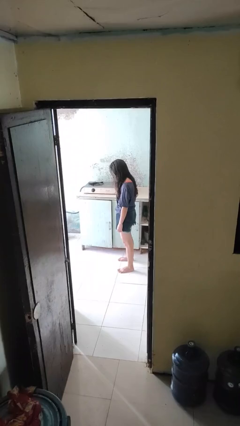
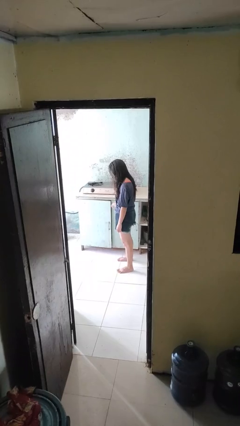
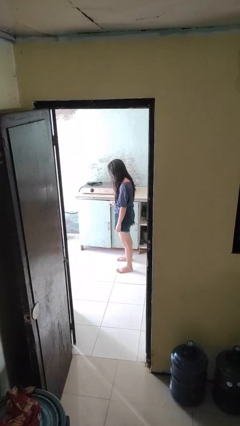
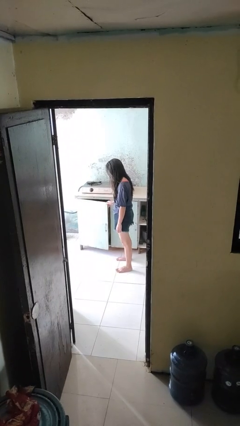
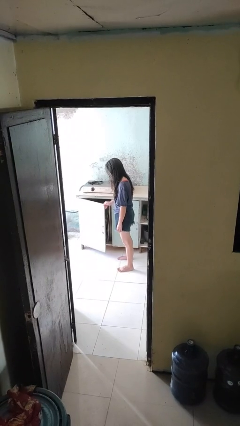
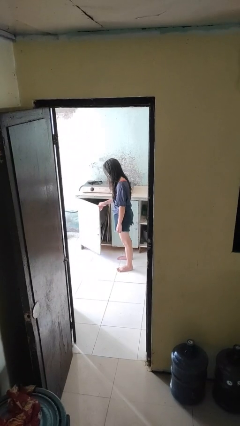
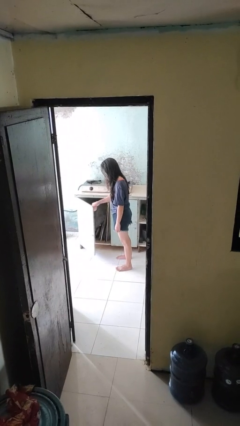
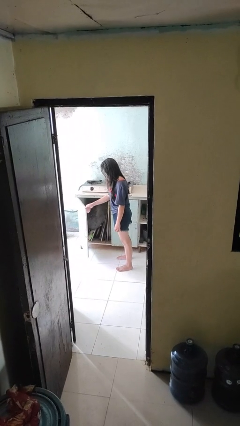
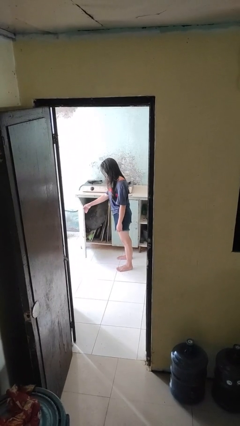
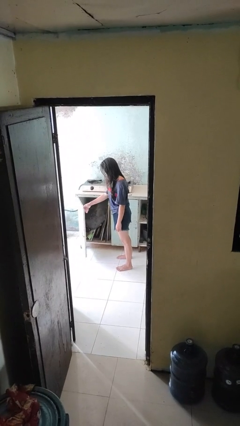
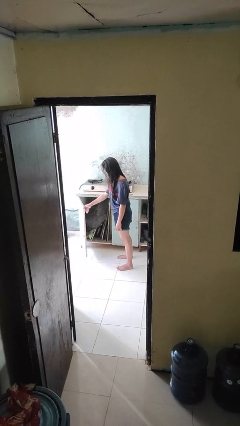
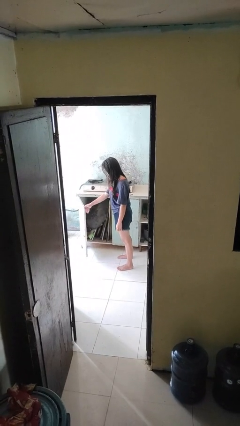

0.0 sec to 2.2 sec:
person opens cabinet

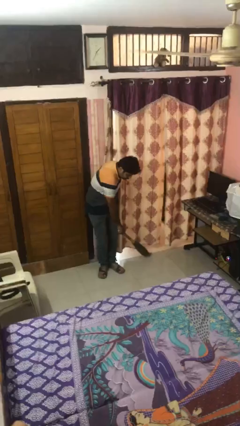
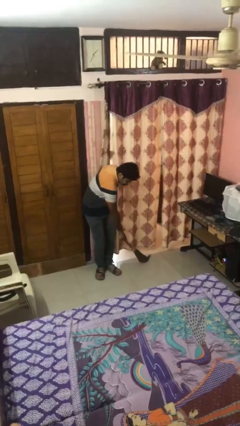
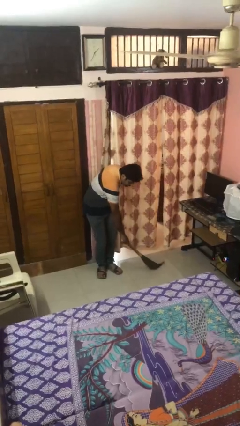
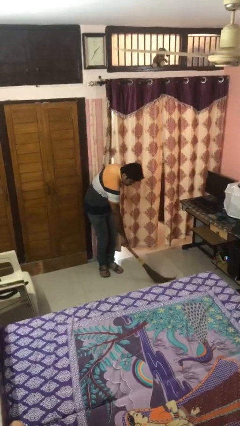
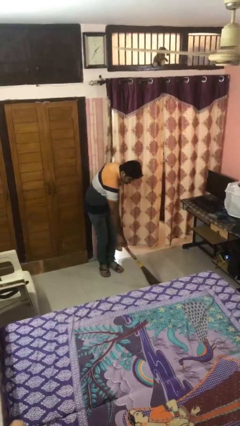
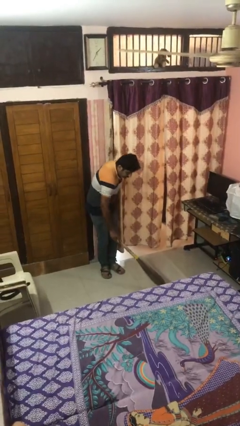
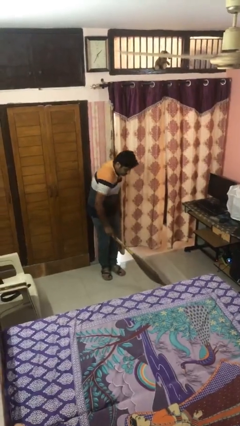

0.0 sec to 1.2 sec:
person sweeps floor

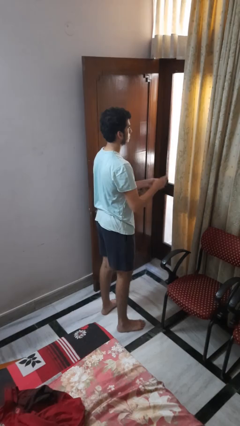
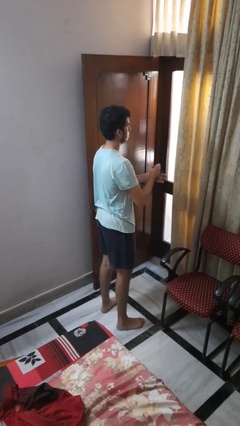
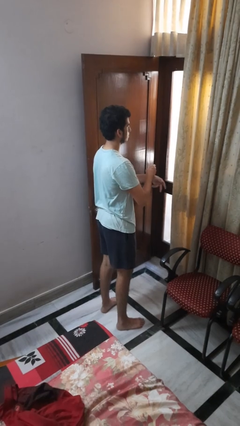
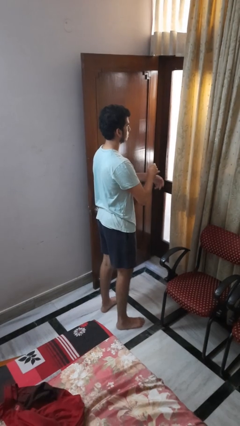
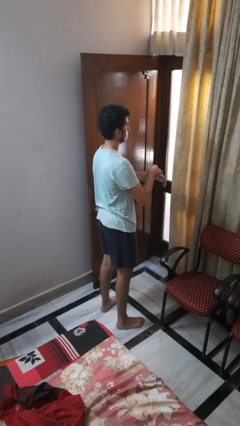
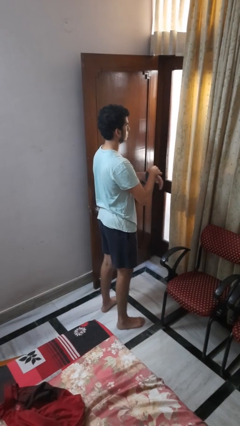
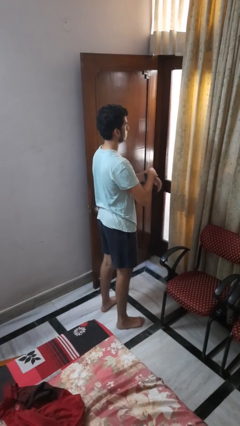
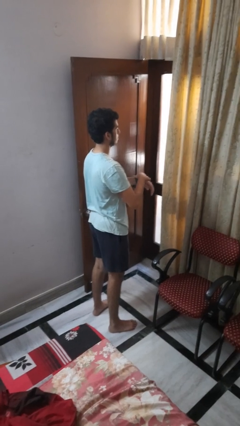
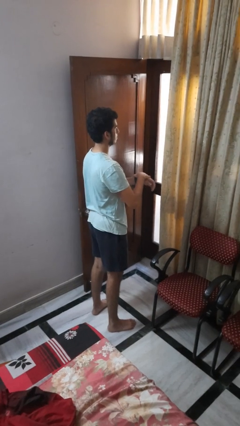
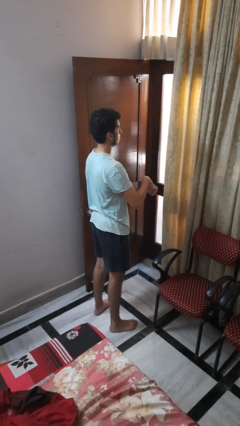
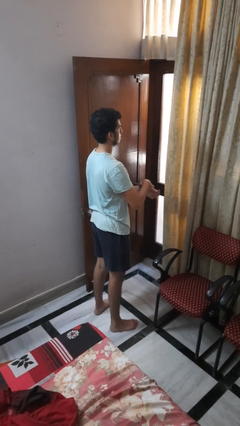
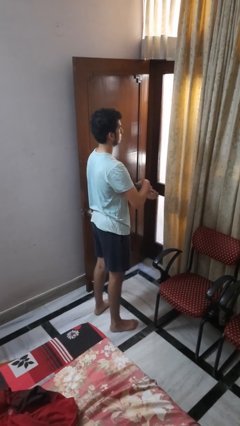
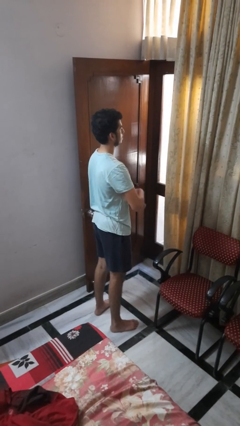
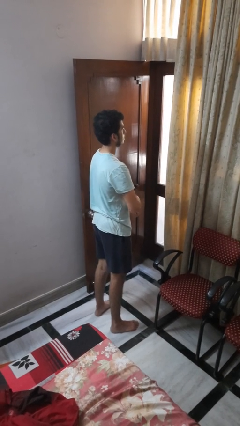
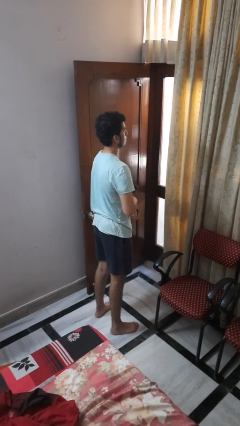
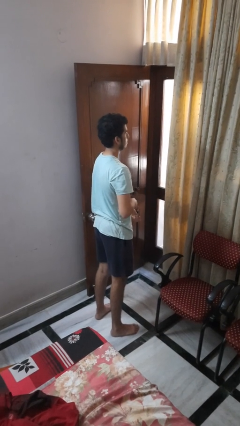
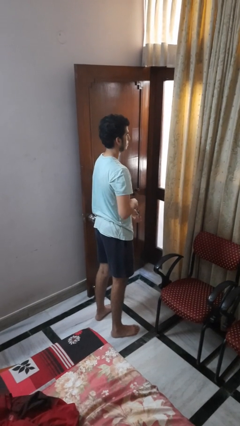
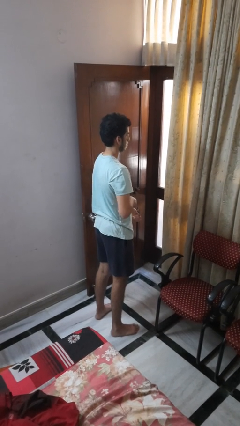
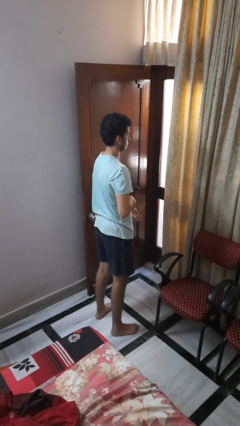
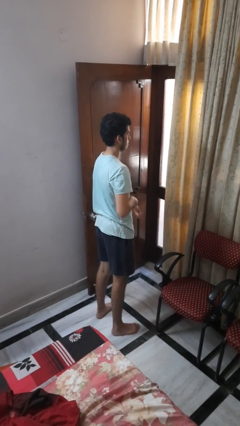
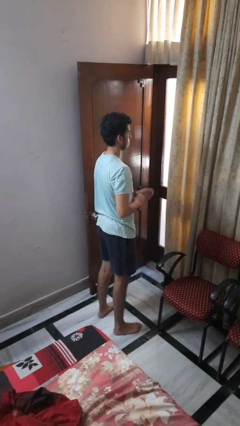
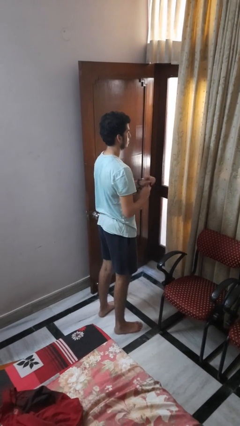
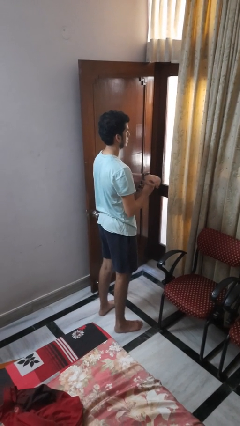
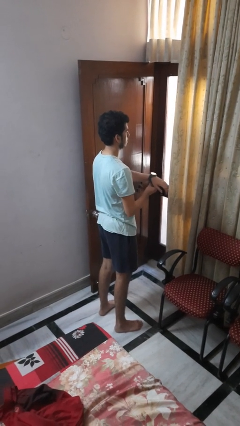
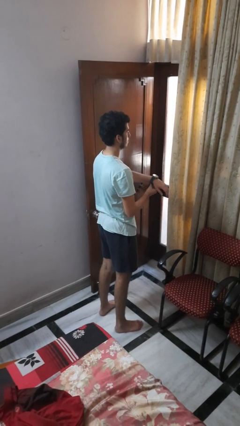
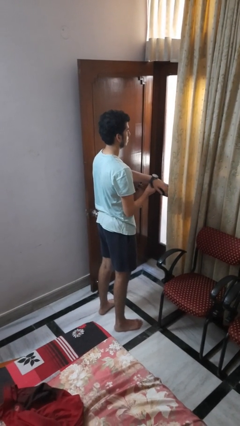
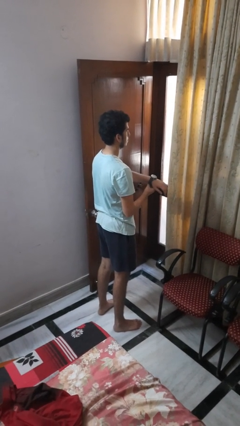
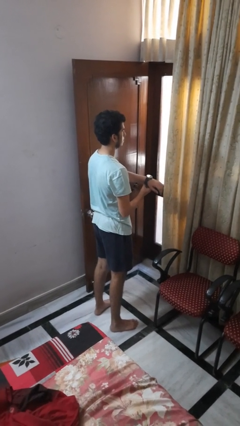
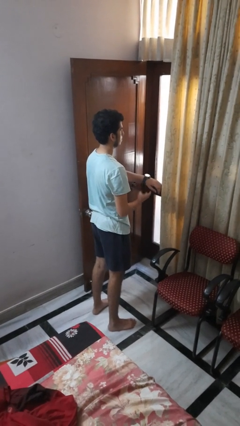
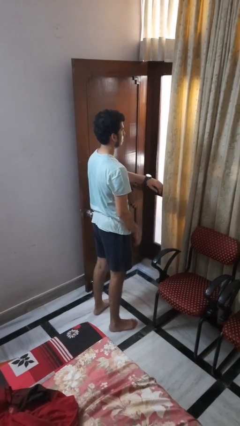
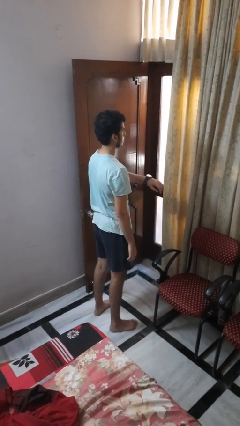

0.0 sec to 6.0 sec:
person puts on wristwatch

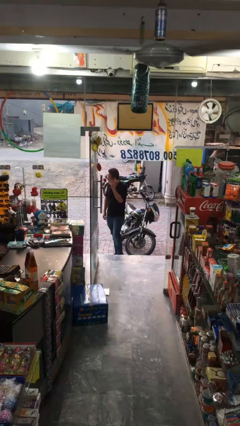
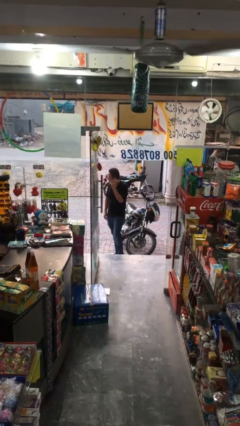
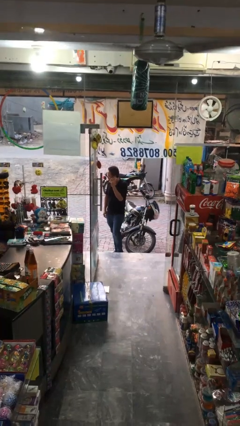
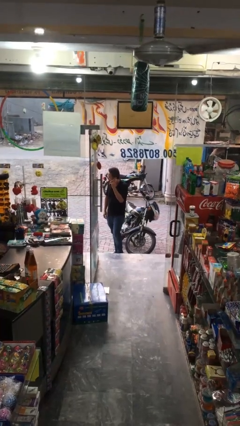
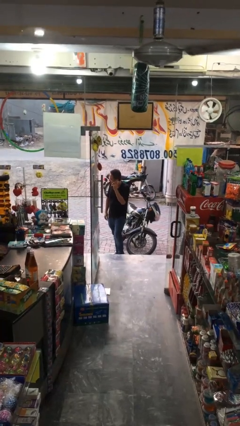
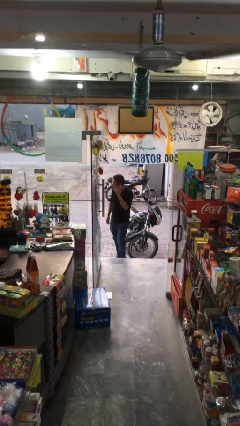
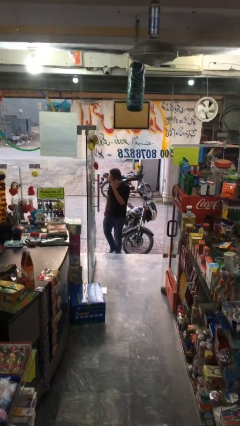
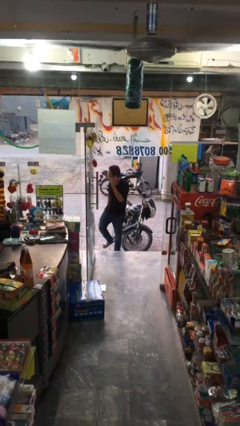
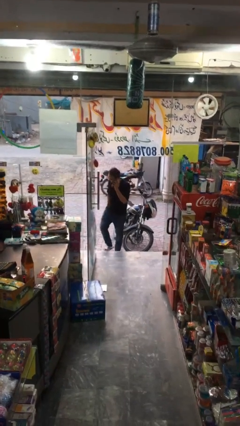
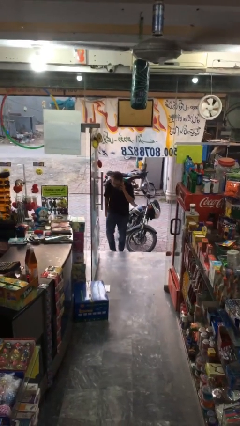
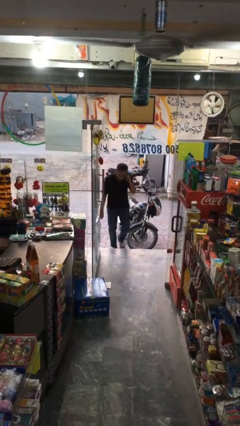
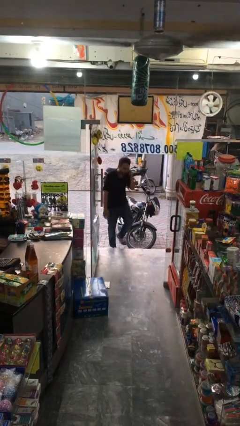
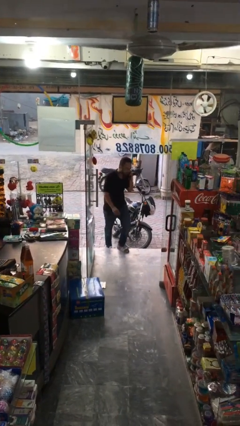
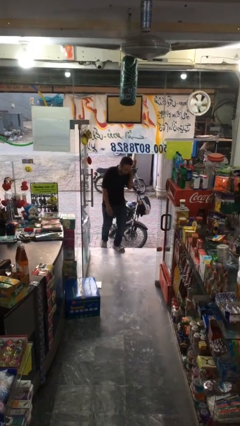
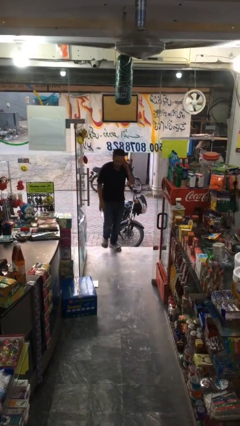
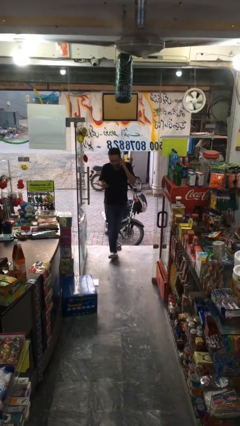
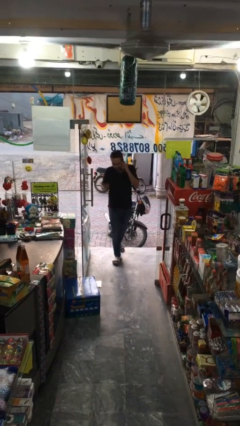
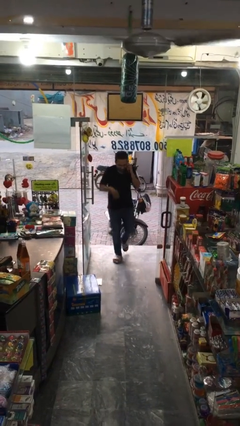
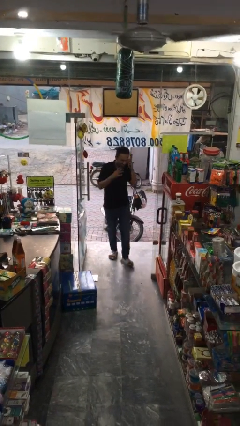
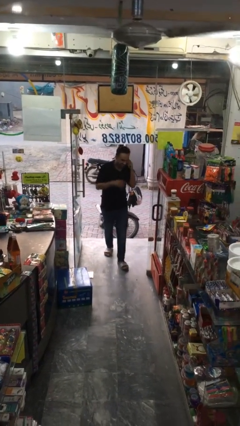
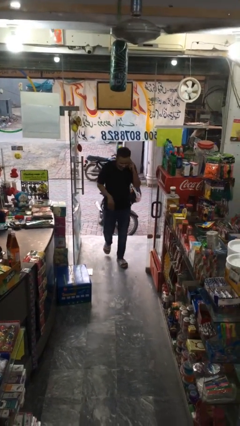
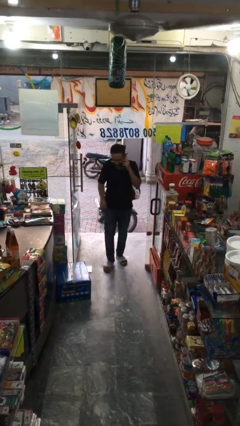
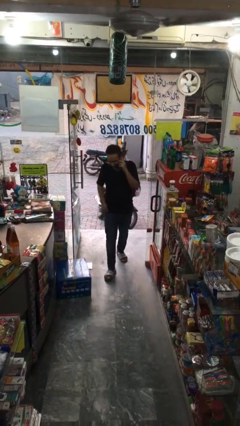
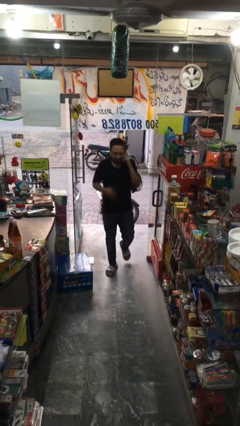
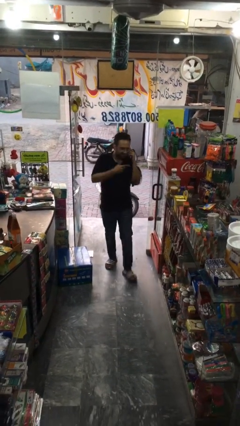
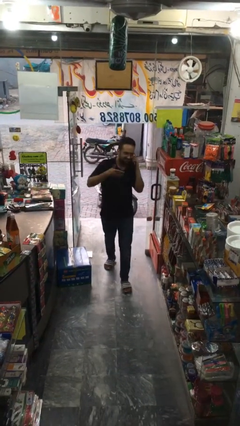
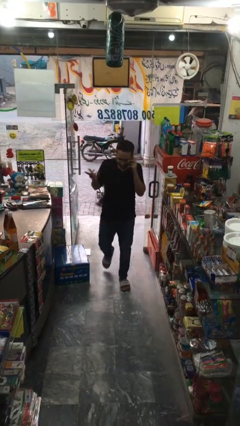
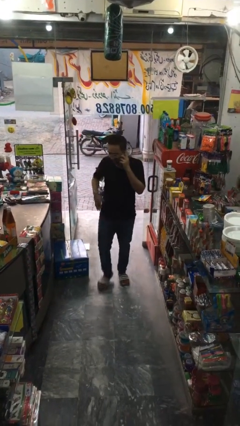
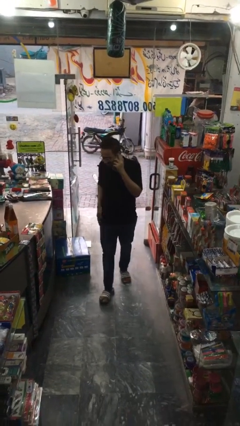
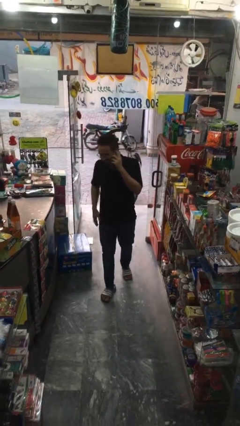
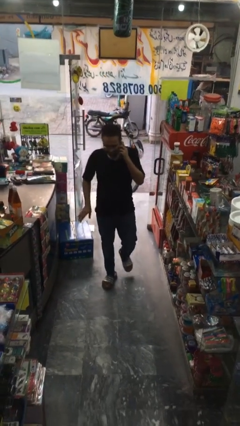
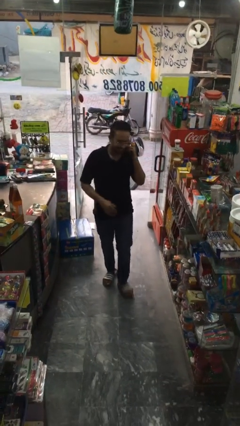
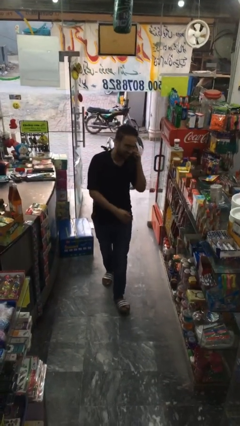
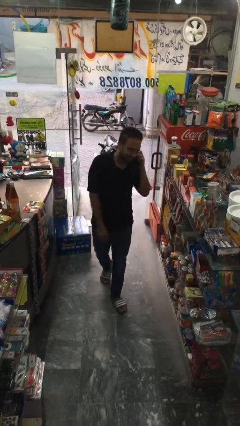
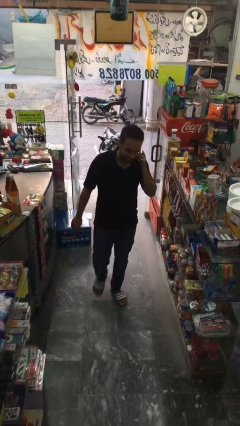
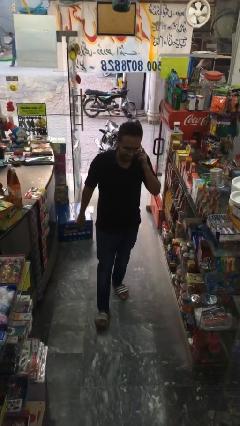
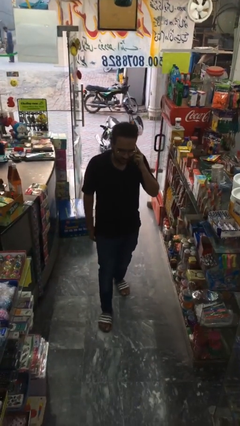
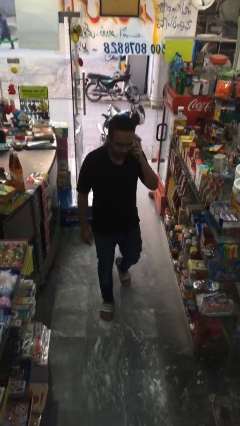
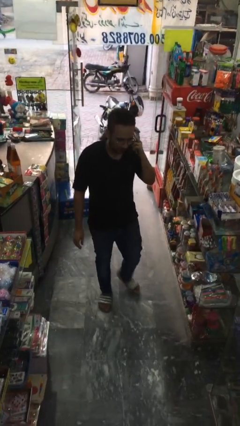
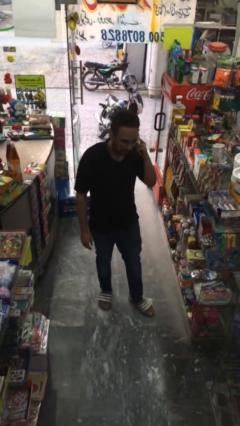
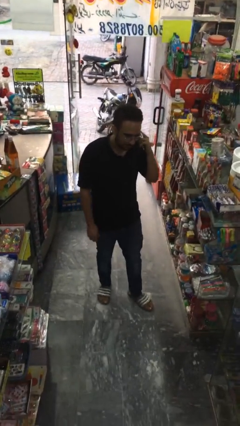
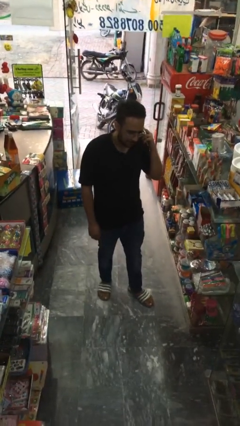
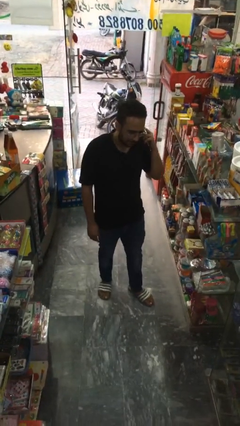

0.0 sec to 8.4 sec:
person enters scene through structure
